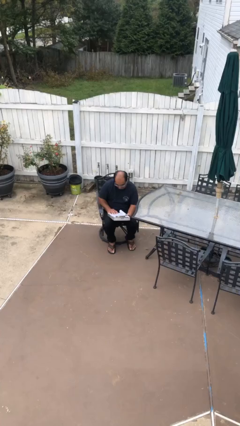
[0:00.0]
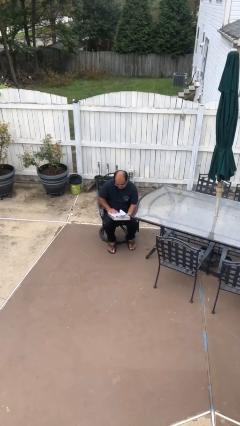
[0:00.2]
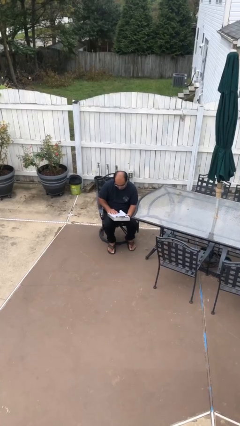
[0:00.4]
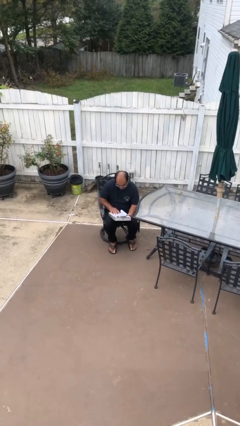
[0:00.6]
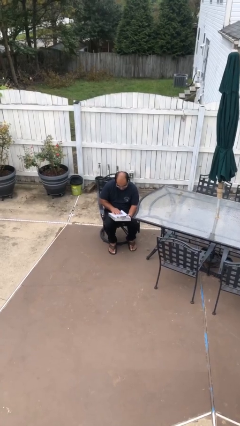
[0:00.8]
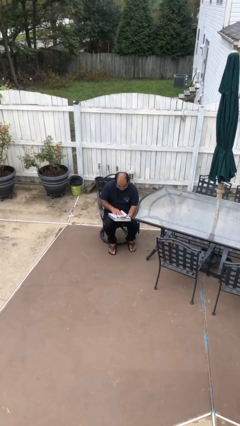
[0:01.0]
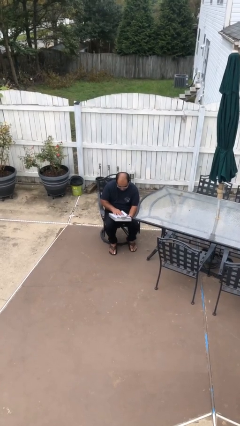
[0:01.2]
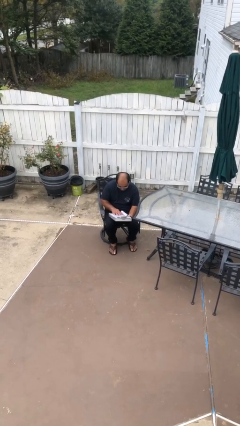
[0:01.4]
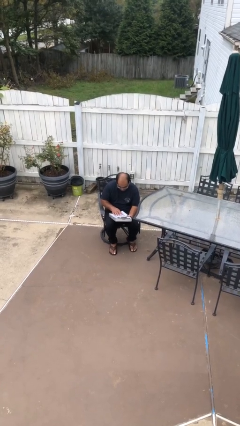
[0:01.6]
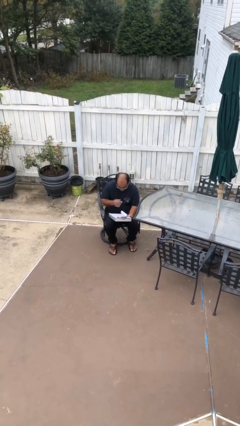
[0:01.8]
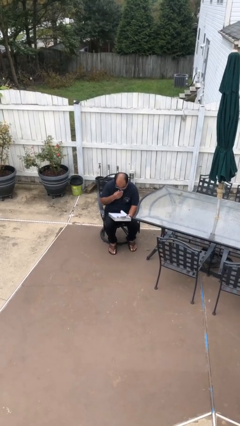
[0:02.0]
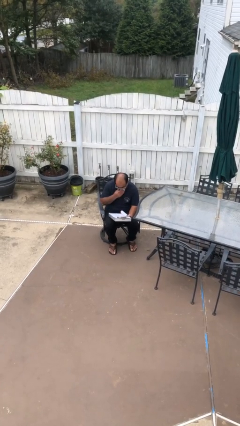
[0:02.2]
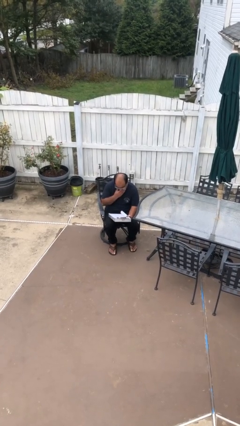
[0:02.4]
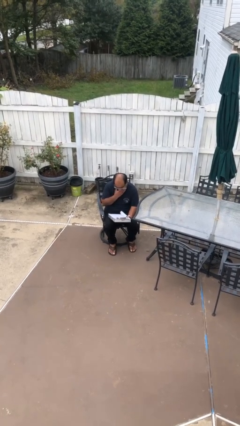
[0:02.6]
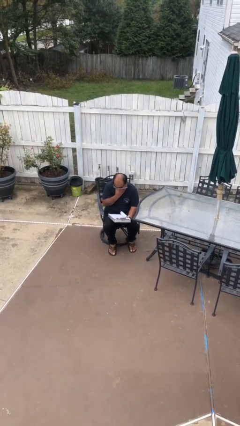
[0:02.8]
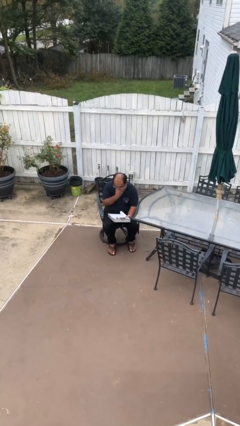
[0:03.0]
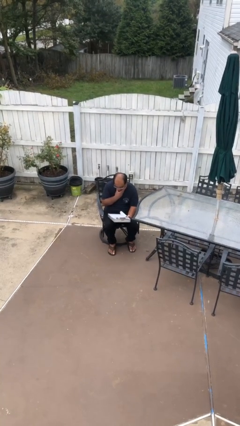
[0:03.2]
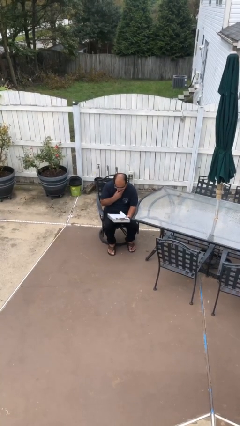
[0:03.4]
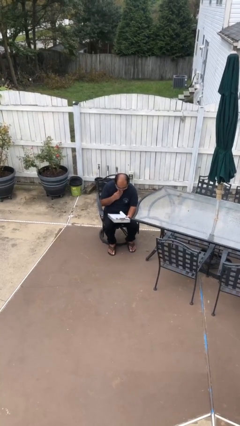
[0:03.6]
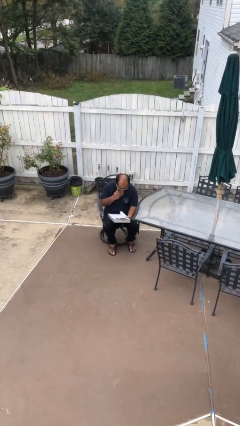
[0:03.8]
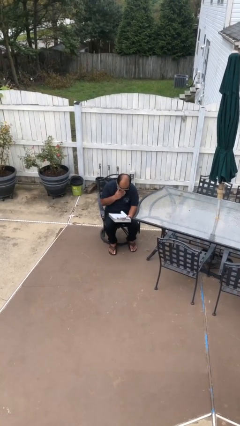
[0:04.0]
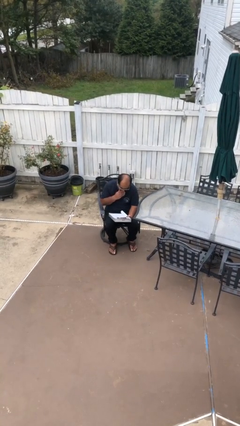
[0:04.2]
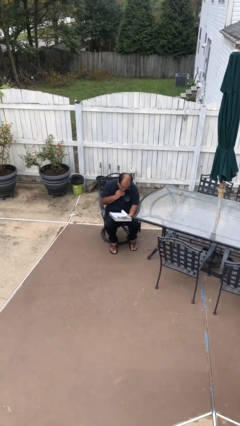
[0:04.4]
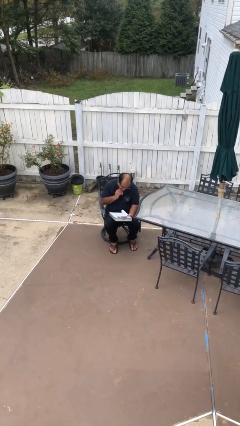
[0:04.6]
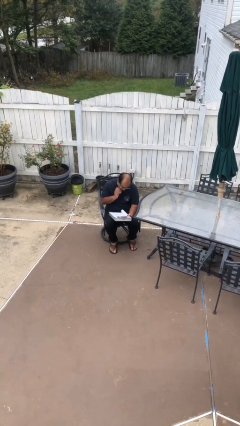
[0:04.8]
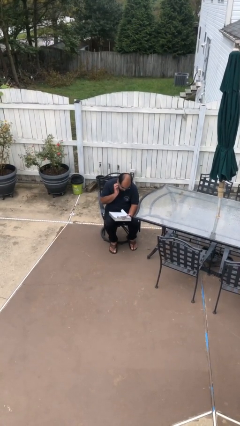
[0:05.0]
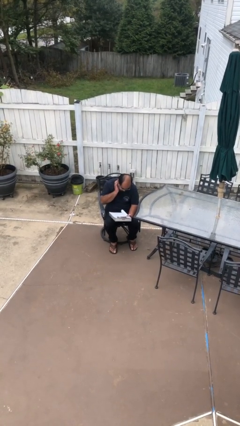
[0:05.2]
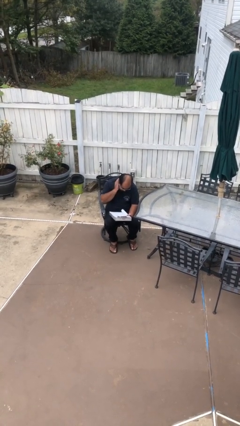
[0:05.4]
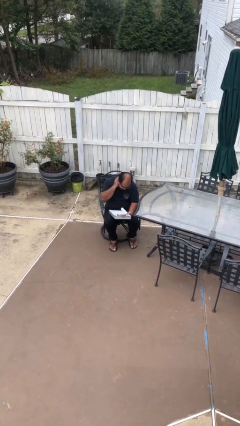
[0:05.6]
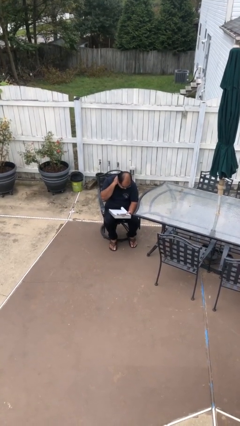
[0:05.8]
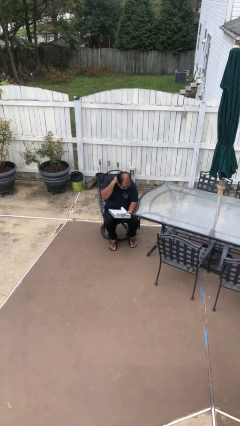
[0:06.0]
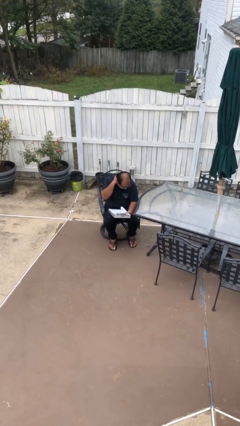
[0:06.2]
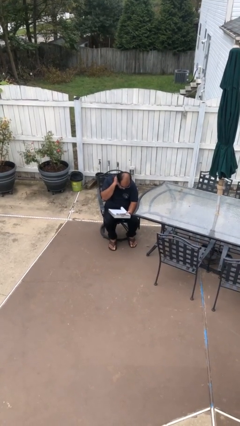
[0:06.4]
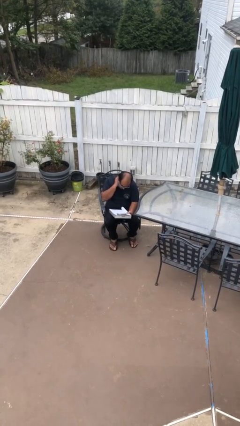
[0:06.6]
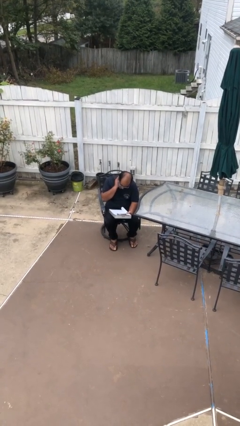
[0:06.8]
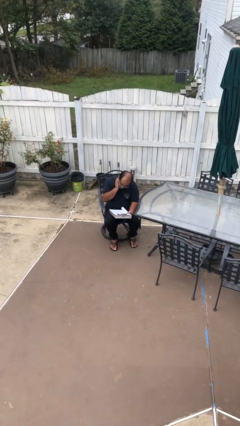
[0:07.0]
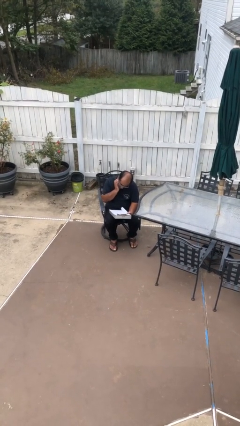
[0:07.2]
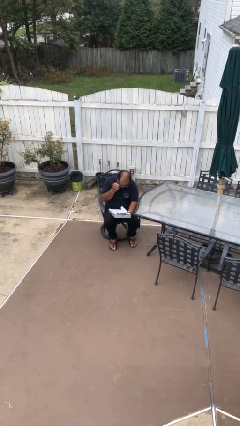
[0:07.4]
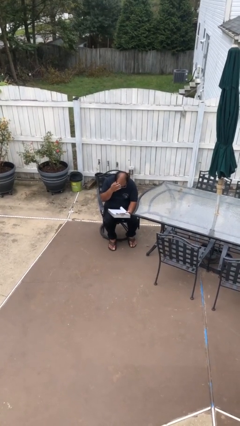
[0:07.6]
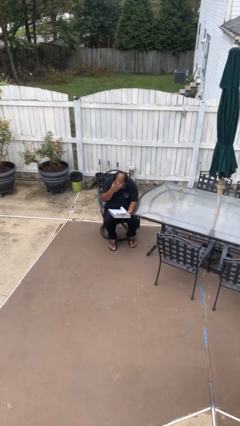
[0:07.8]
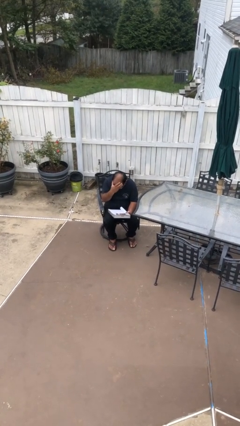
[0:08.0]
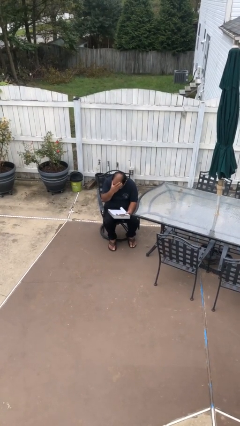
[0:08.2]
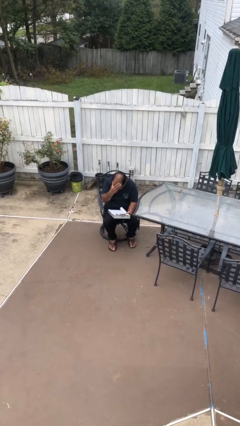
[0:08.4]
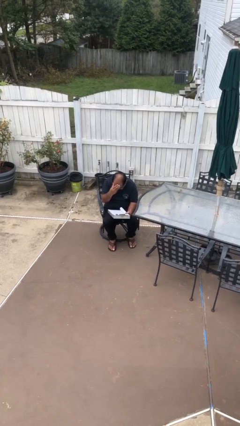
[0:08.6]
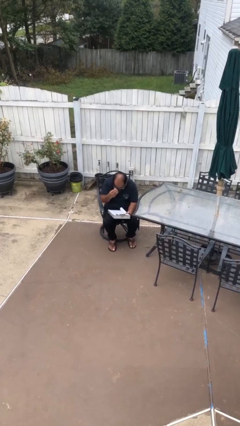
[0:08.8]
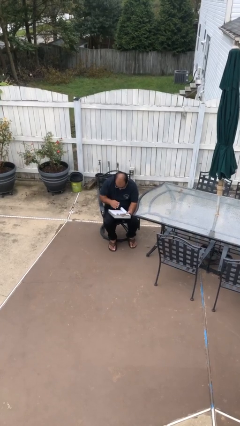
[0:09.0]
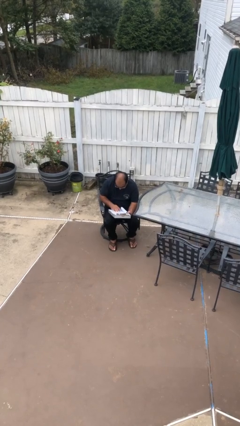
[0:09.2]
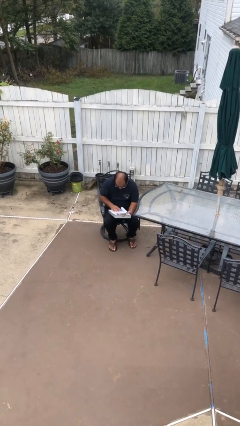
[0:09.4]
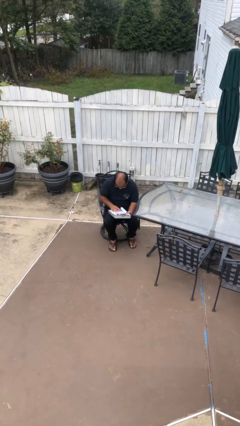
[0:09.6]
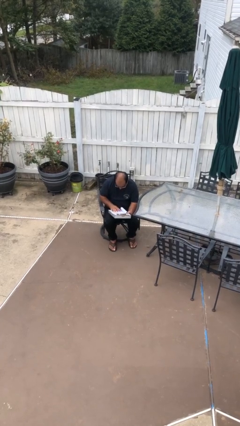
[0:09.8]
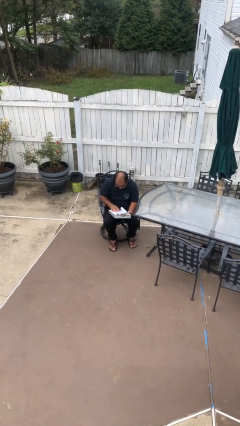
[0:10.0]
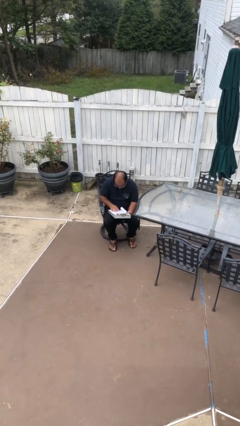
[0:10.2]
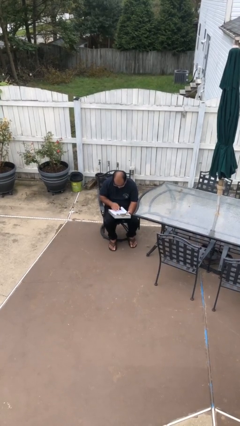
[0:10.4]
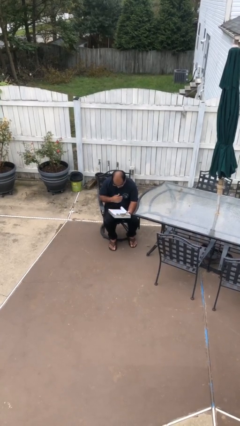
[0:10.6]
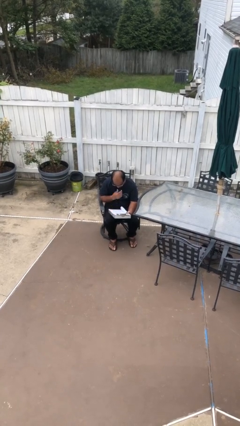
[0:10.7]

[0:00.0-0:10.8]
person reads document

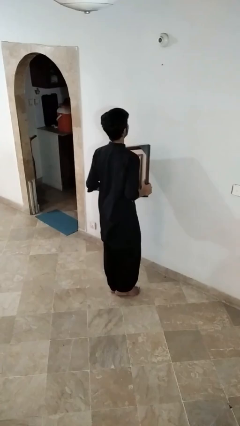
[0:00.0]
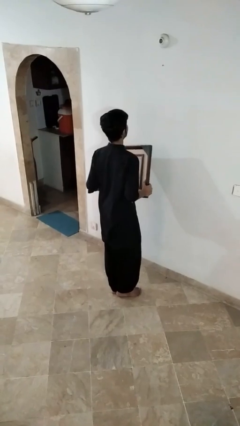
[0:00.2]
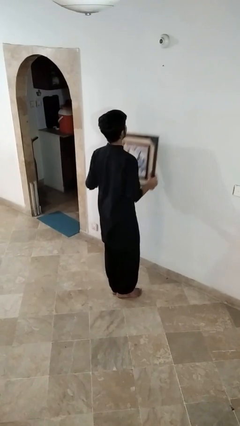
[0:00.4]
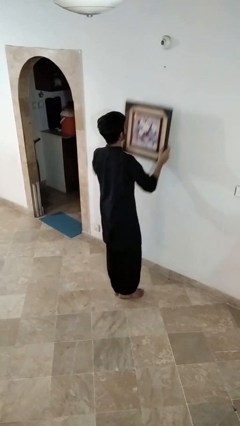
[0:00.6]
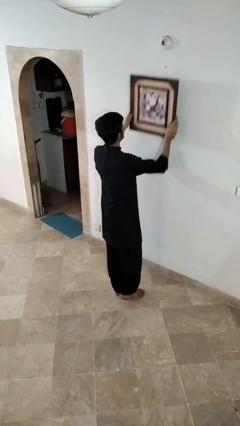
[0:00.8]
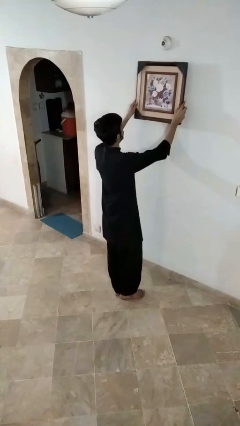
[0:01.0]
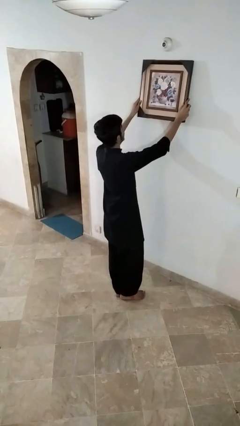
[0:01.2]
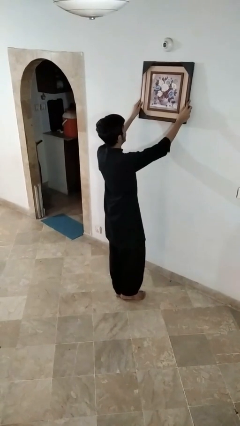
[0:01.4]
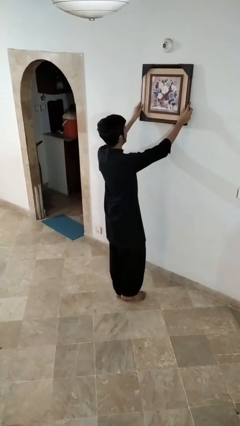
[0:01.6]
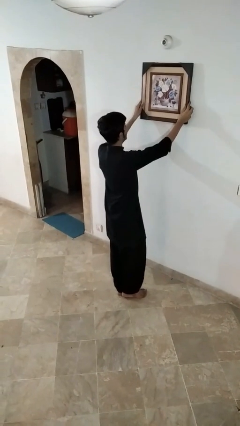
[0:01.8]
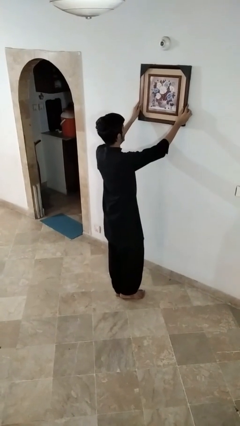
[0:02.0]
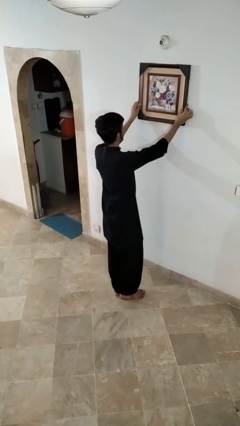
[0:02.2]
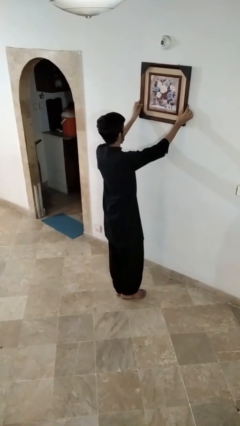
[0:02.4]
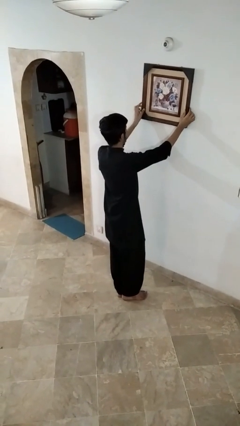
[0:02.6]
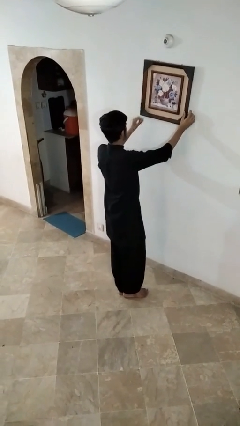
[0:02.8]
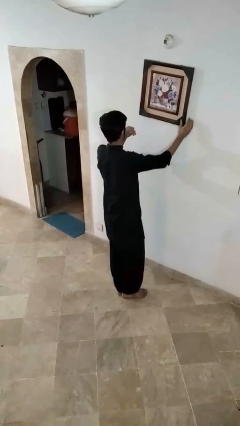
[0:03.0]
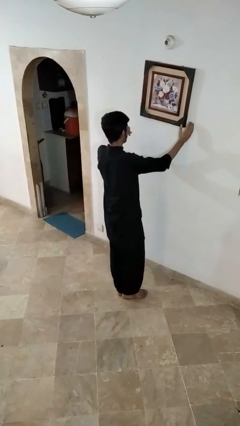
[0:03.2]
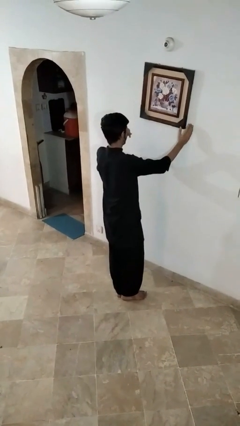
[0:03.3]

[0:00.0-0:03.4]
person puts up picture frame

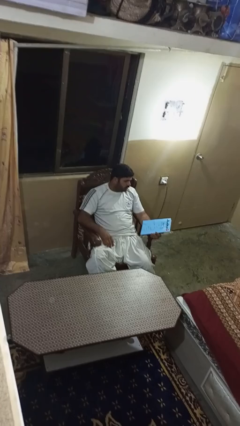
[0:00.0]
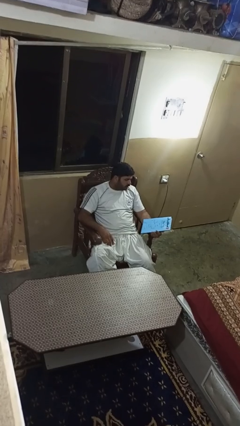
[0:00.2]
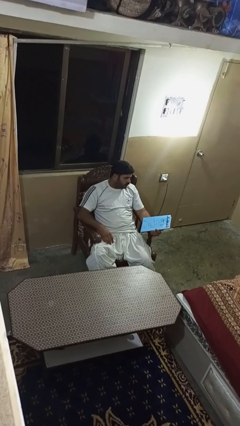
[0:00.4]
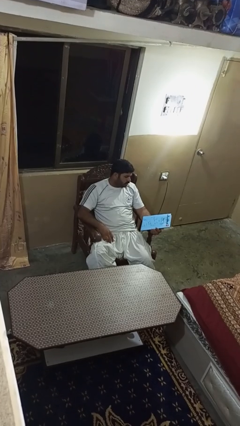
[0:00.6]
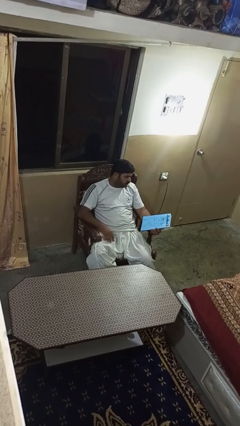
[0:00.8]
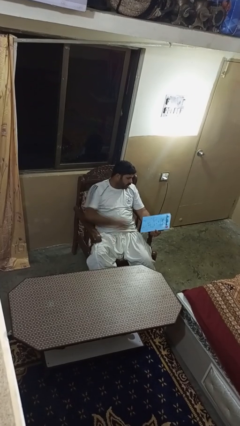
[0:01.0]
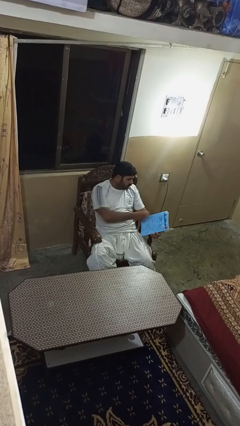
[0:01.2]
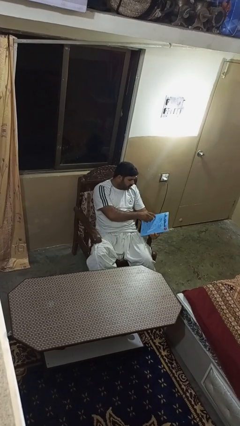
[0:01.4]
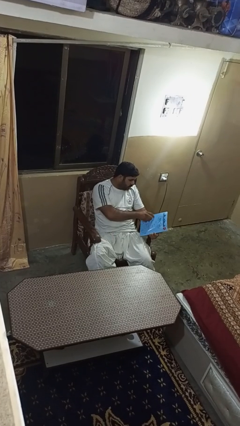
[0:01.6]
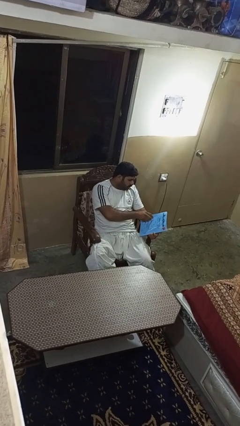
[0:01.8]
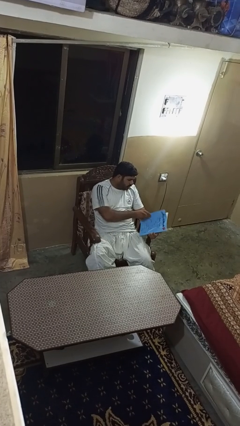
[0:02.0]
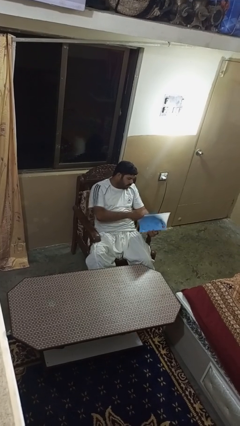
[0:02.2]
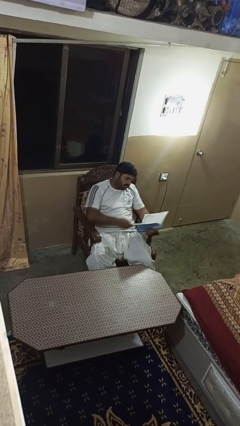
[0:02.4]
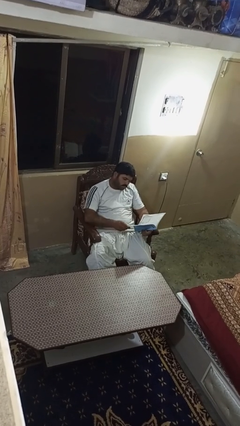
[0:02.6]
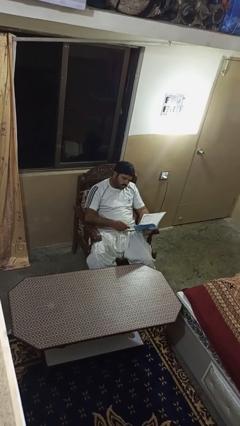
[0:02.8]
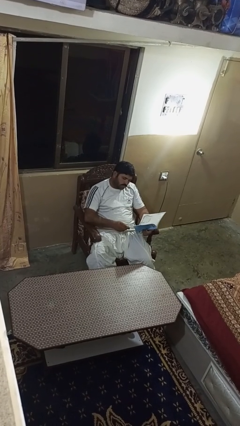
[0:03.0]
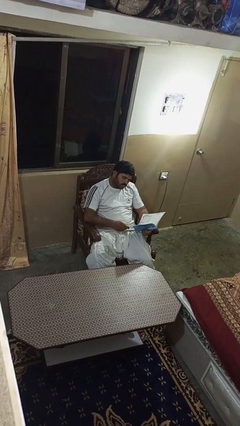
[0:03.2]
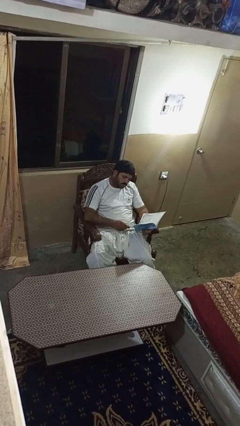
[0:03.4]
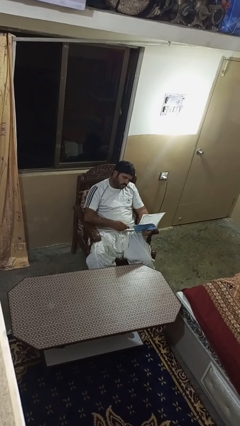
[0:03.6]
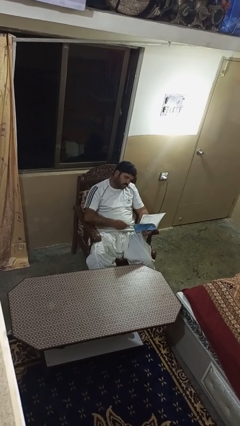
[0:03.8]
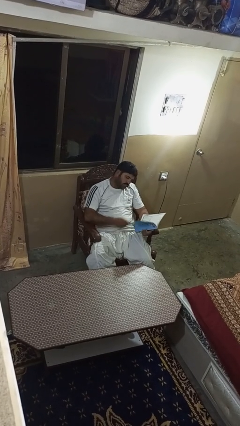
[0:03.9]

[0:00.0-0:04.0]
person reads magazine
